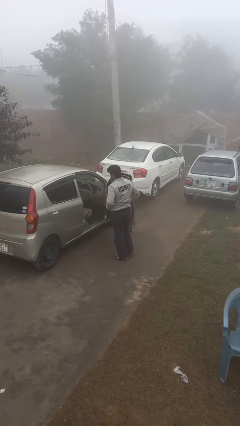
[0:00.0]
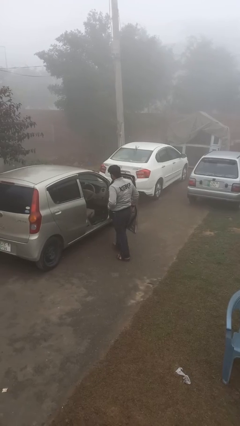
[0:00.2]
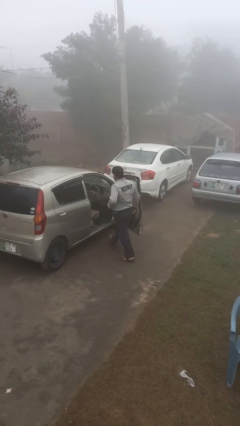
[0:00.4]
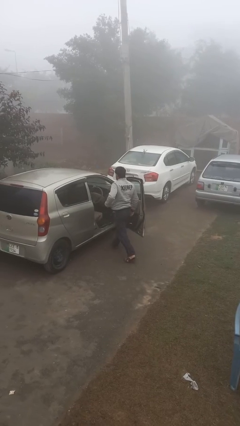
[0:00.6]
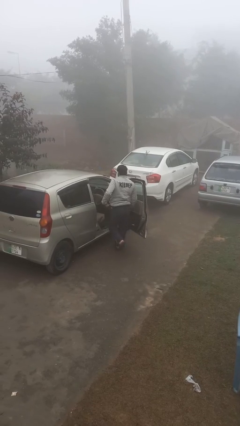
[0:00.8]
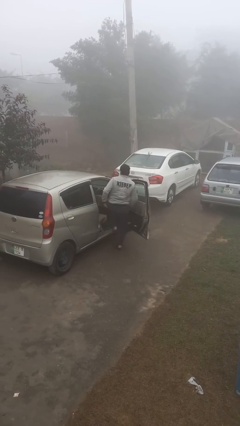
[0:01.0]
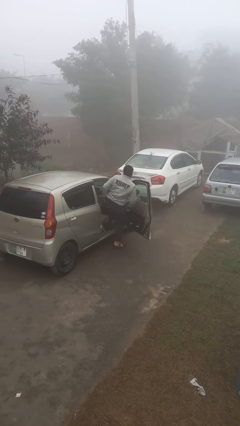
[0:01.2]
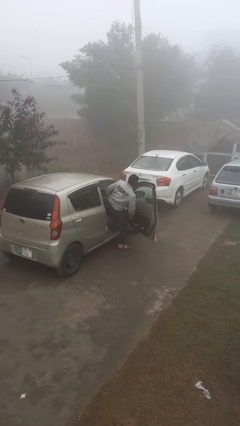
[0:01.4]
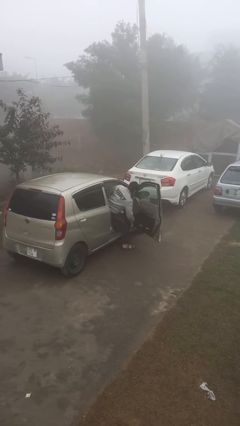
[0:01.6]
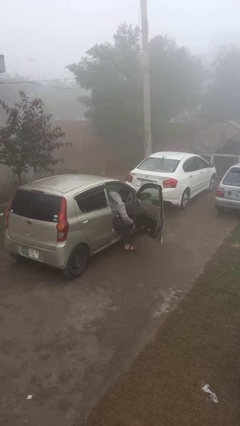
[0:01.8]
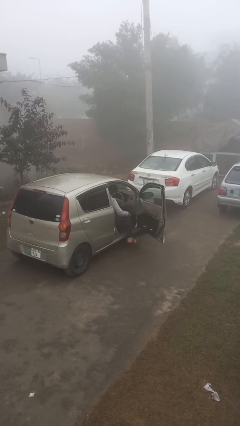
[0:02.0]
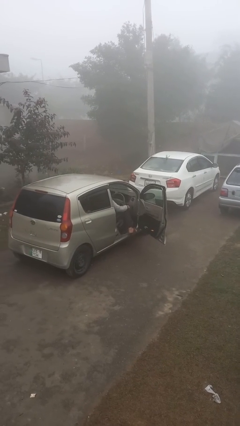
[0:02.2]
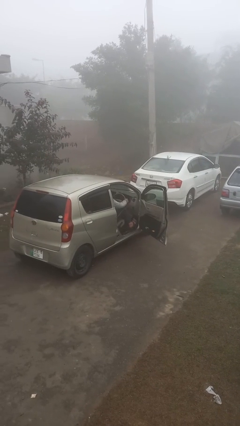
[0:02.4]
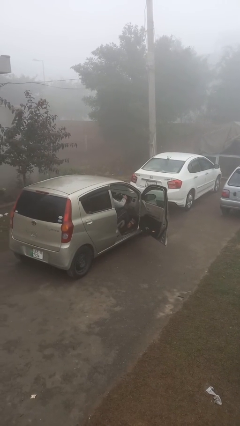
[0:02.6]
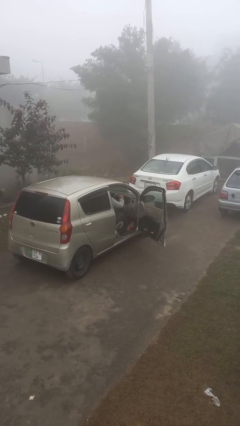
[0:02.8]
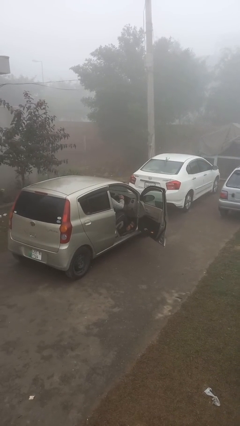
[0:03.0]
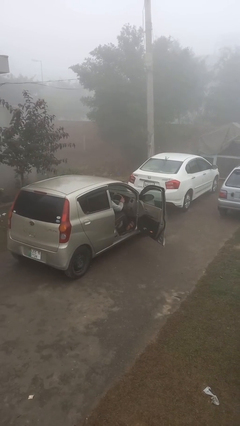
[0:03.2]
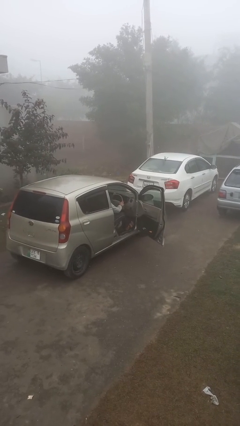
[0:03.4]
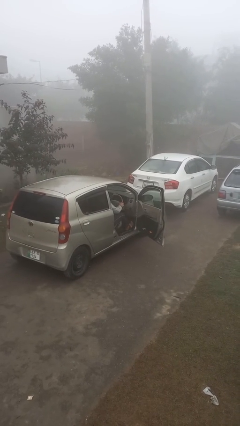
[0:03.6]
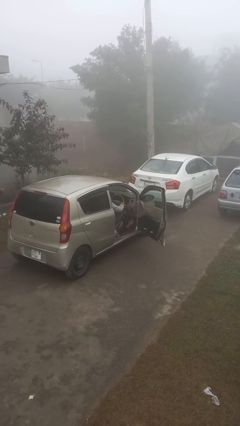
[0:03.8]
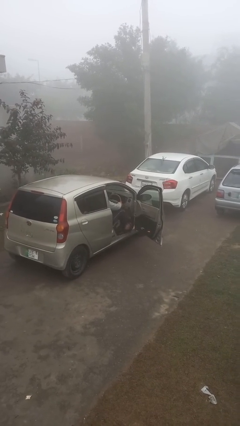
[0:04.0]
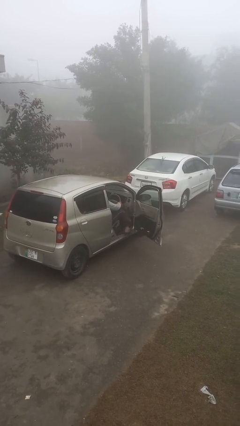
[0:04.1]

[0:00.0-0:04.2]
person enters car

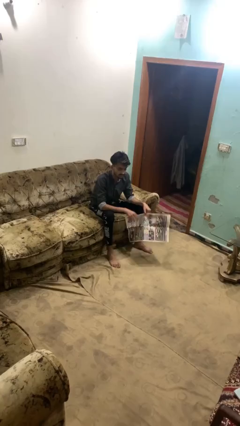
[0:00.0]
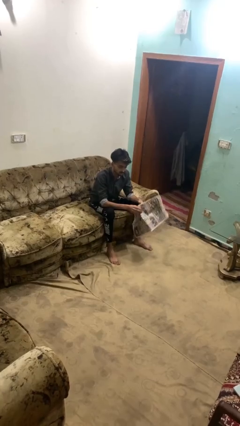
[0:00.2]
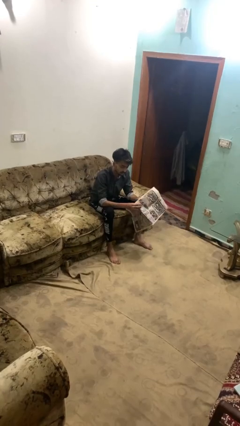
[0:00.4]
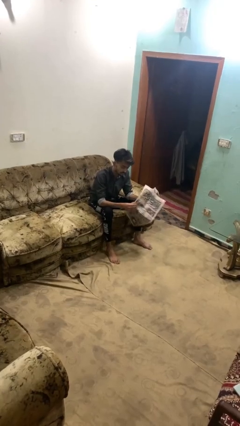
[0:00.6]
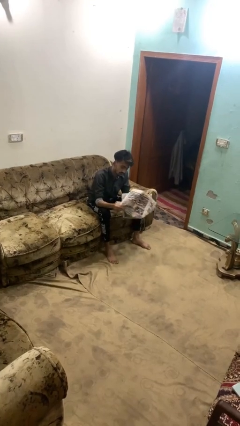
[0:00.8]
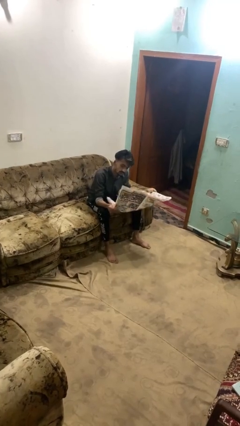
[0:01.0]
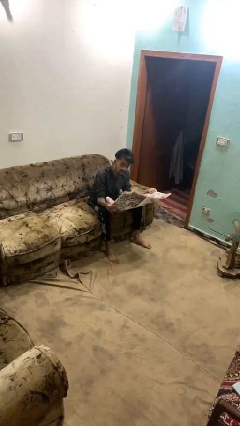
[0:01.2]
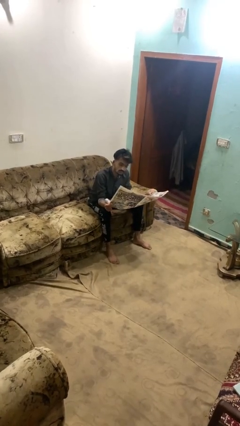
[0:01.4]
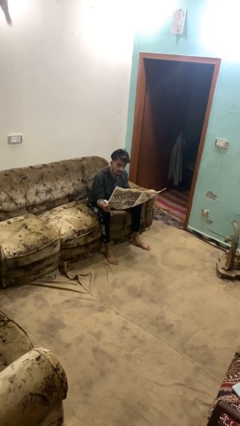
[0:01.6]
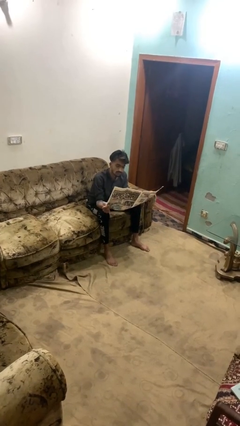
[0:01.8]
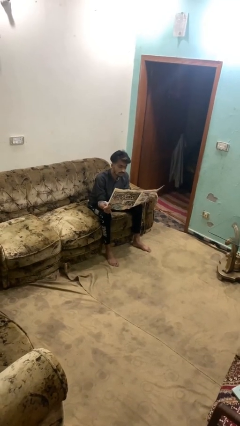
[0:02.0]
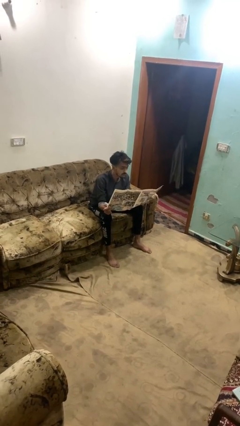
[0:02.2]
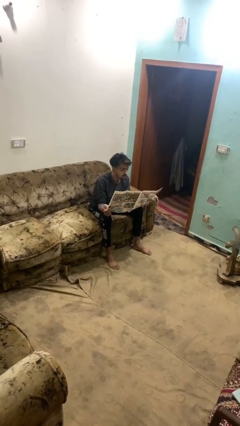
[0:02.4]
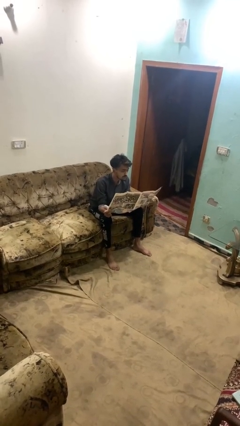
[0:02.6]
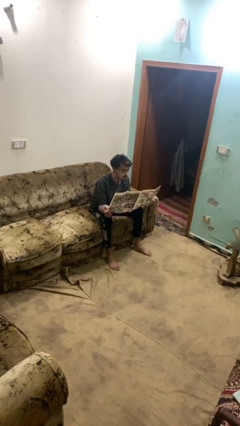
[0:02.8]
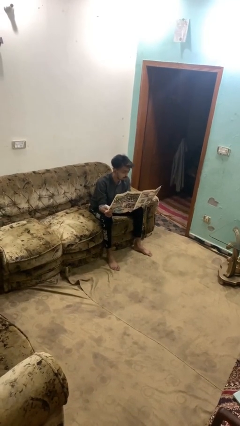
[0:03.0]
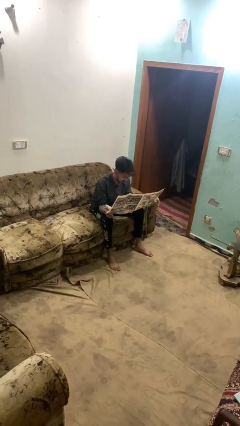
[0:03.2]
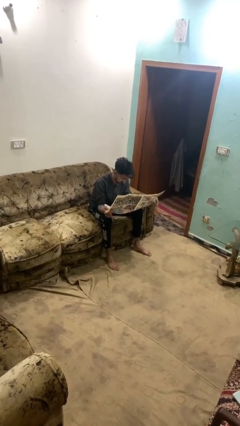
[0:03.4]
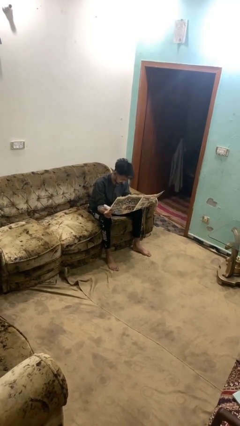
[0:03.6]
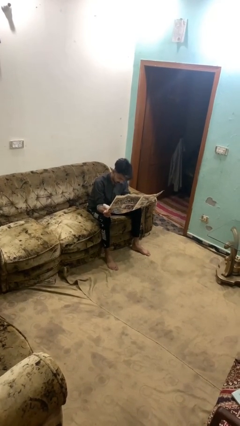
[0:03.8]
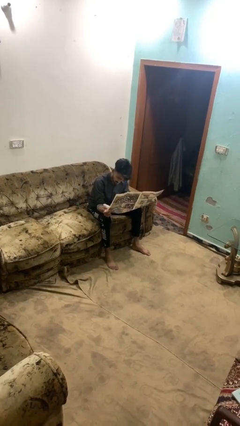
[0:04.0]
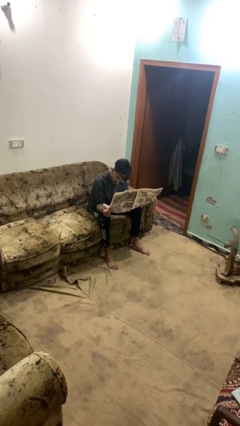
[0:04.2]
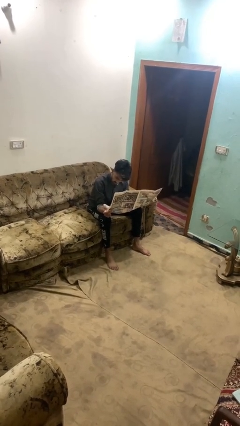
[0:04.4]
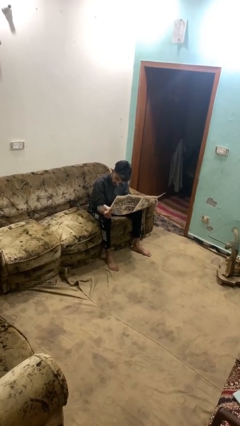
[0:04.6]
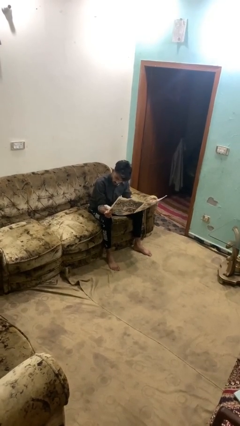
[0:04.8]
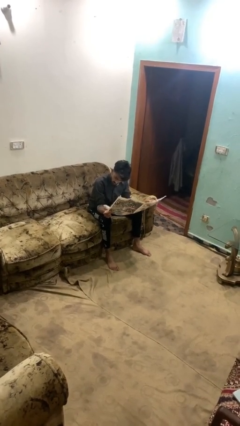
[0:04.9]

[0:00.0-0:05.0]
person reads newspaper

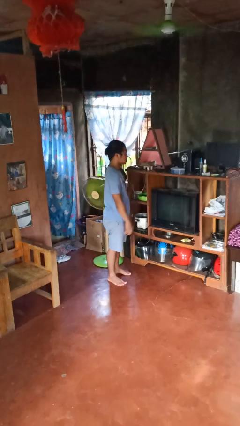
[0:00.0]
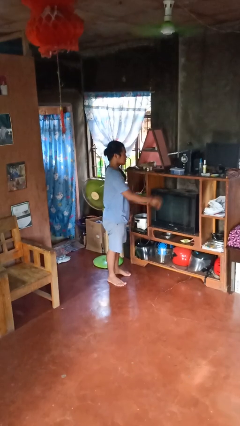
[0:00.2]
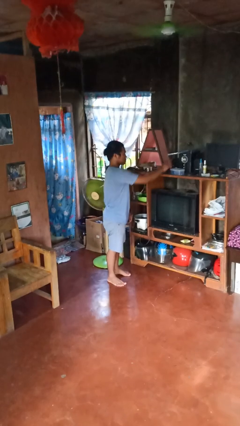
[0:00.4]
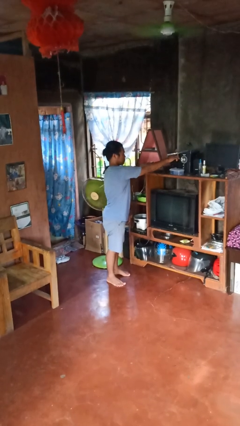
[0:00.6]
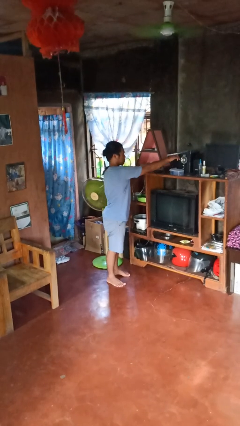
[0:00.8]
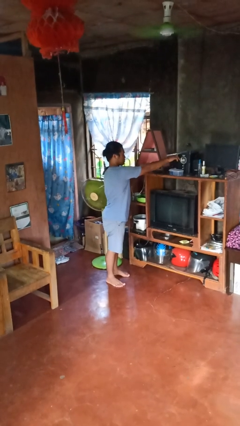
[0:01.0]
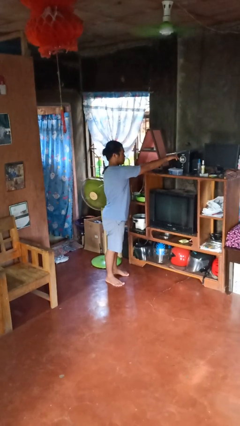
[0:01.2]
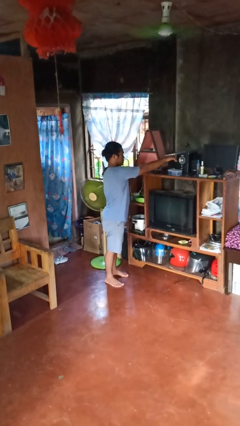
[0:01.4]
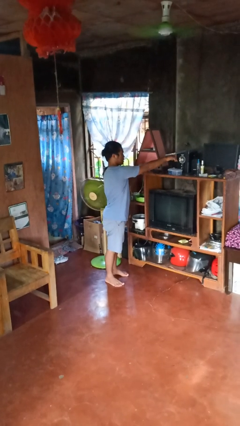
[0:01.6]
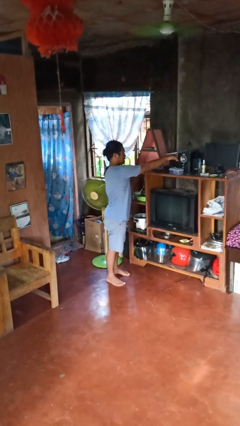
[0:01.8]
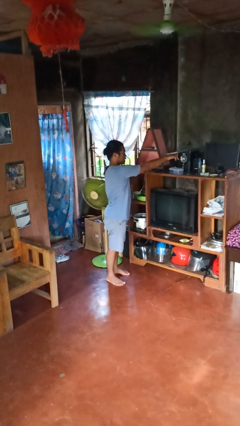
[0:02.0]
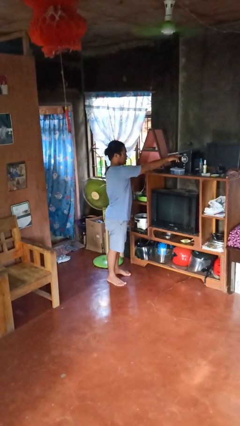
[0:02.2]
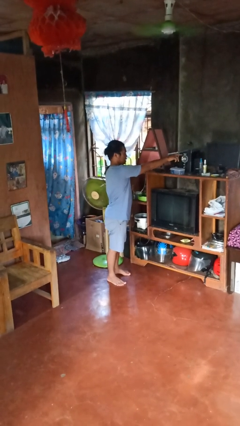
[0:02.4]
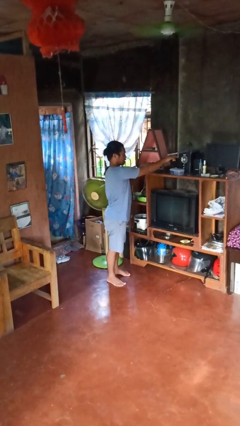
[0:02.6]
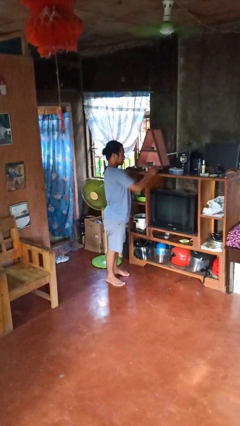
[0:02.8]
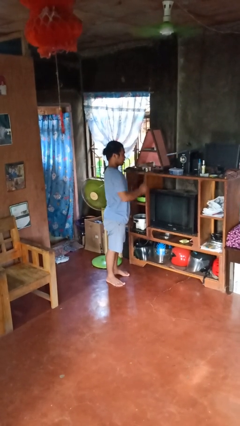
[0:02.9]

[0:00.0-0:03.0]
person taps object with finger

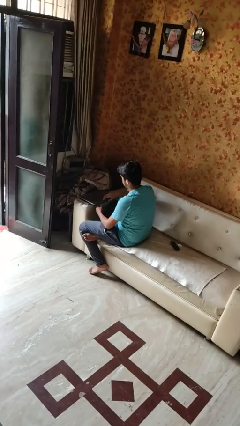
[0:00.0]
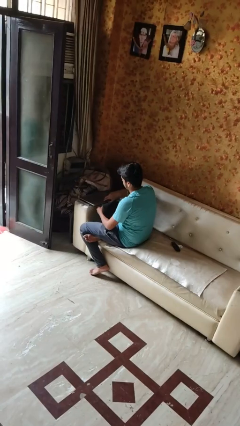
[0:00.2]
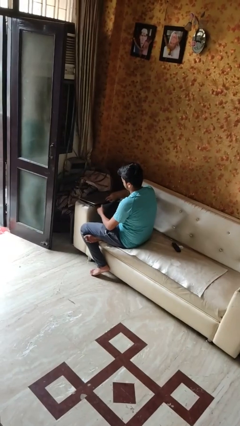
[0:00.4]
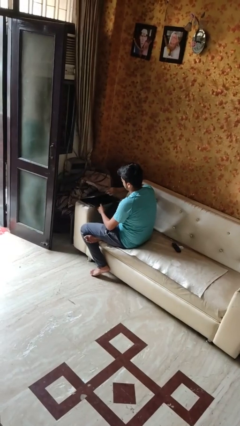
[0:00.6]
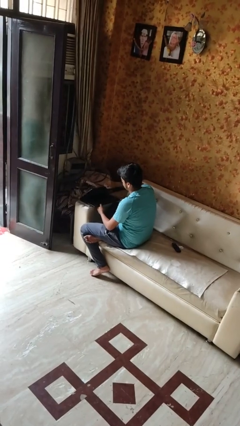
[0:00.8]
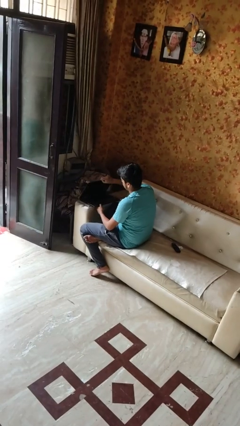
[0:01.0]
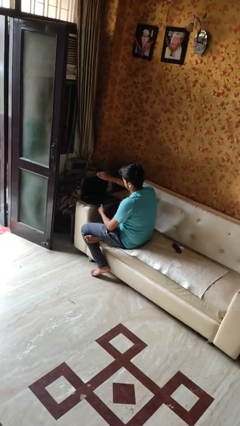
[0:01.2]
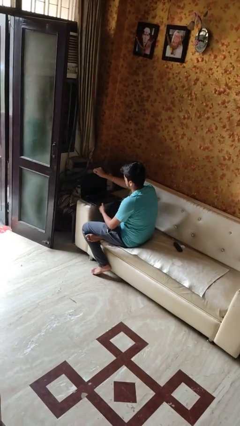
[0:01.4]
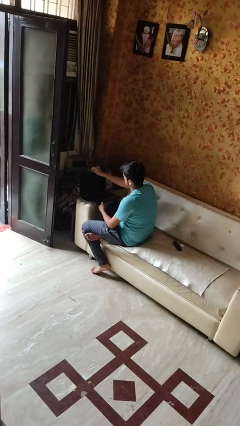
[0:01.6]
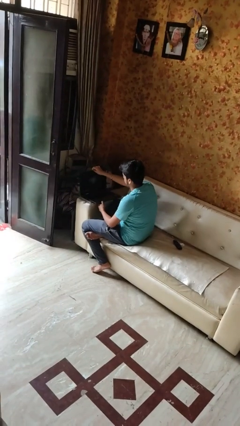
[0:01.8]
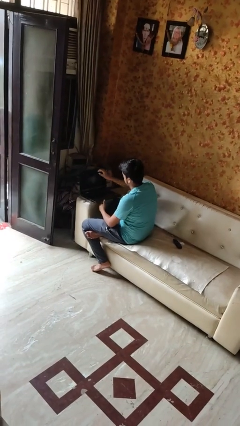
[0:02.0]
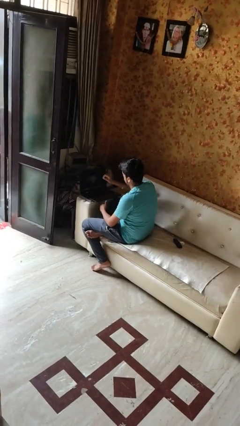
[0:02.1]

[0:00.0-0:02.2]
person opens laptop

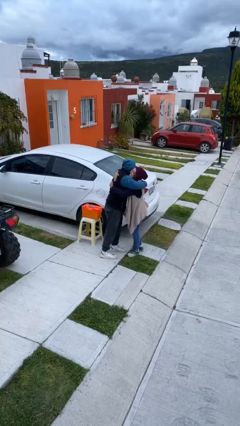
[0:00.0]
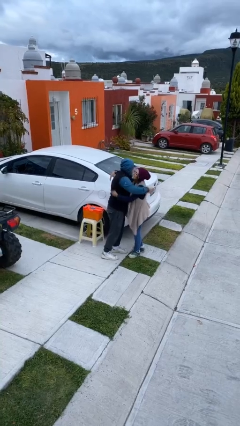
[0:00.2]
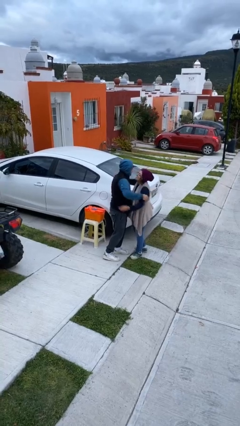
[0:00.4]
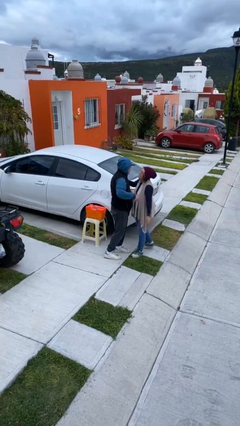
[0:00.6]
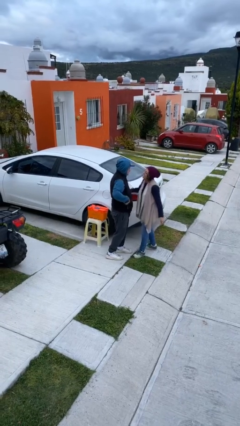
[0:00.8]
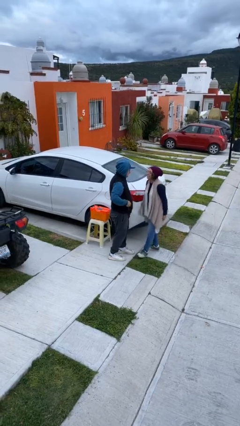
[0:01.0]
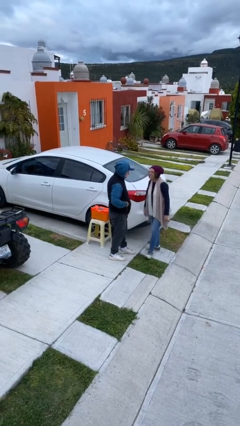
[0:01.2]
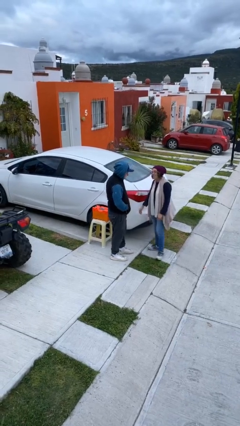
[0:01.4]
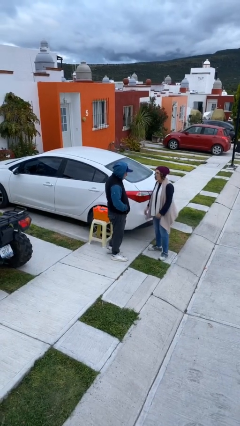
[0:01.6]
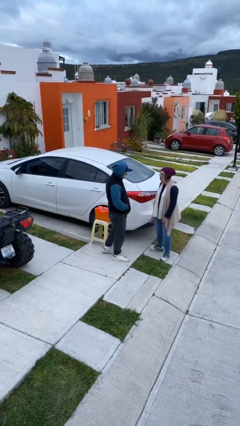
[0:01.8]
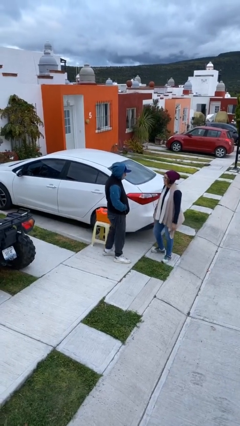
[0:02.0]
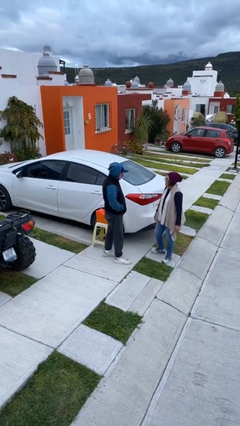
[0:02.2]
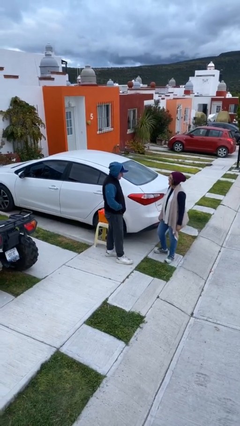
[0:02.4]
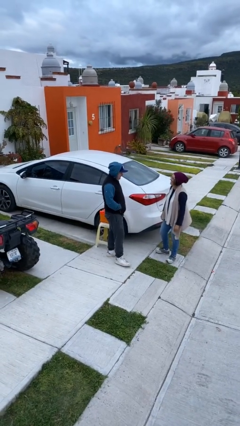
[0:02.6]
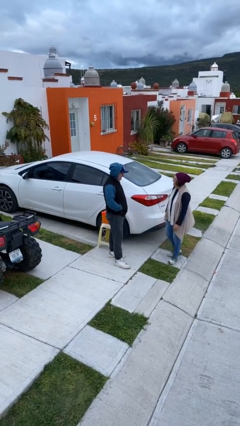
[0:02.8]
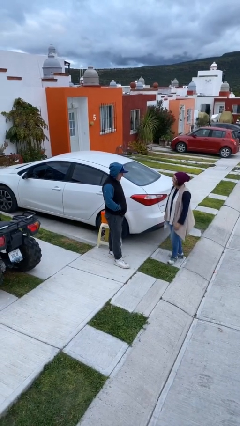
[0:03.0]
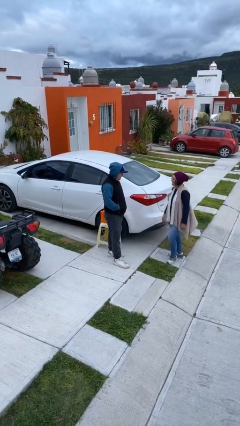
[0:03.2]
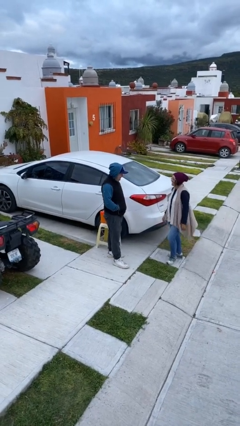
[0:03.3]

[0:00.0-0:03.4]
person talks to person
